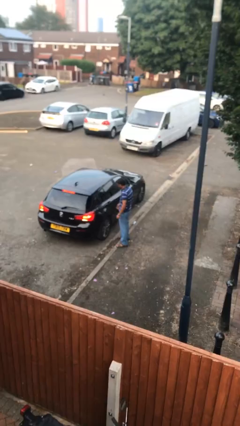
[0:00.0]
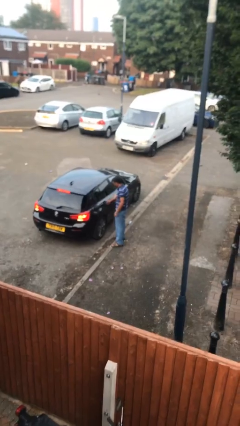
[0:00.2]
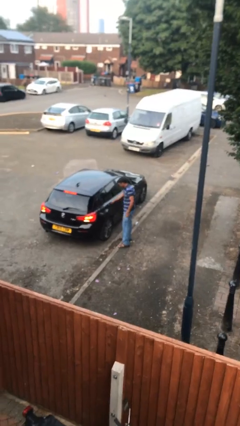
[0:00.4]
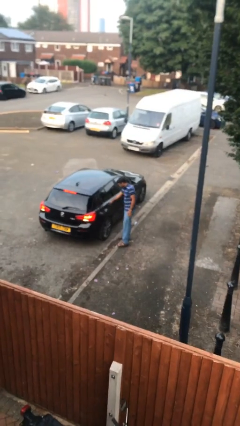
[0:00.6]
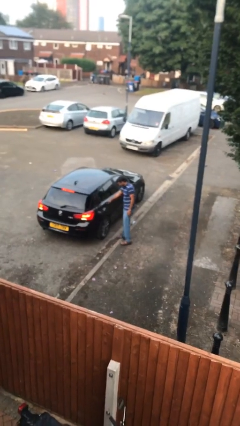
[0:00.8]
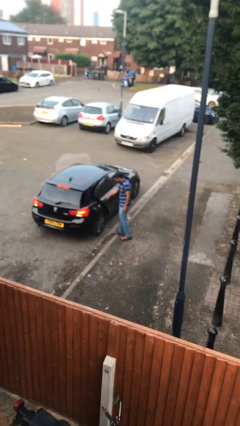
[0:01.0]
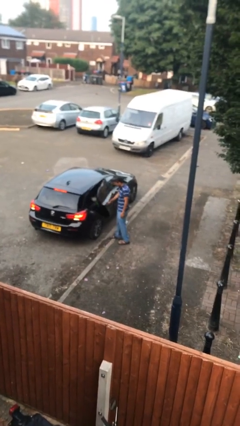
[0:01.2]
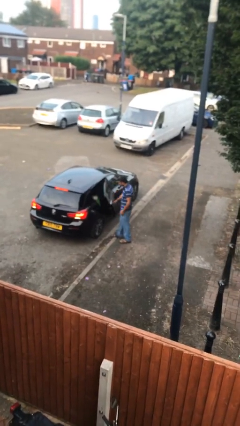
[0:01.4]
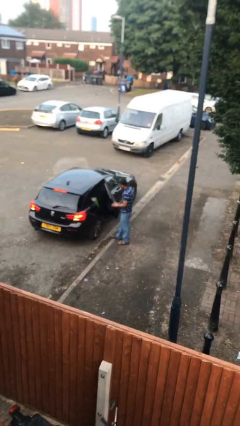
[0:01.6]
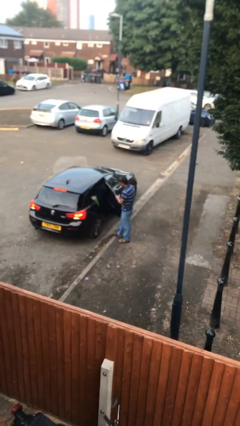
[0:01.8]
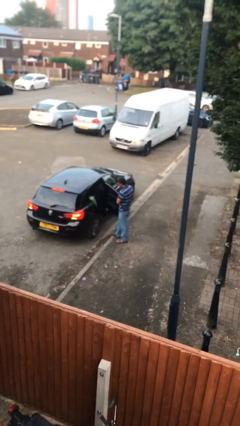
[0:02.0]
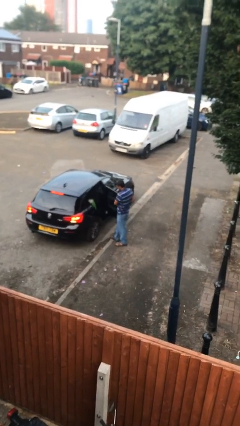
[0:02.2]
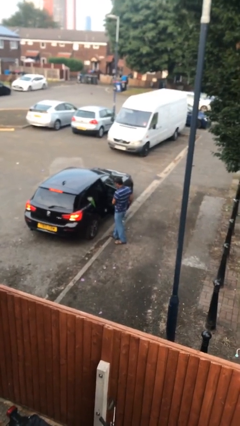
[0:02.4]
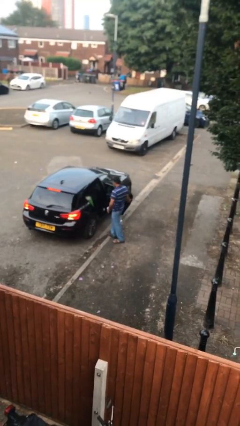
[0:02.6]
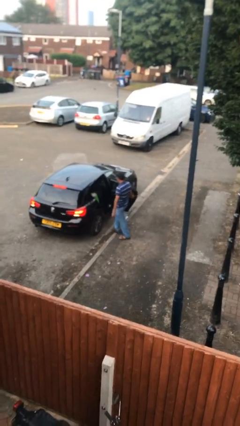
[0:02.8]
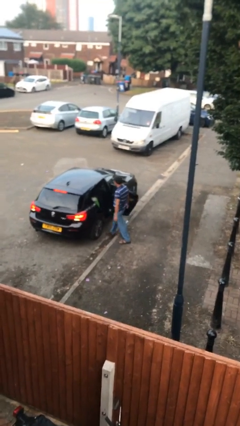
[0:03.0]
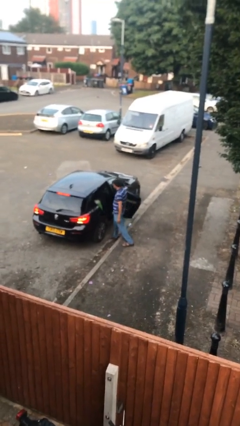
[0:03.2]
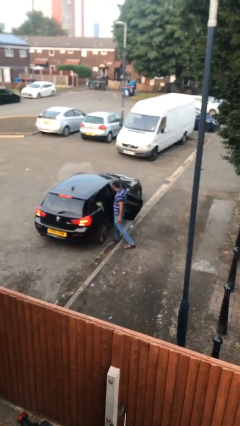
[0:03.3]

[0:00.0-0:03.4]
person opens car door

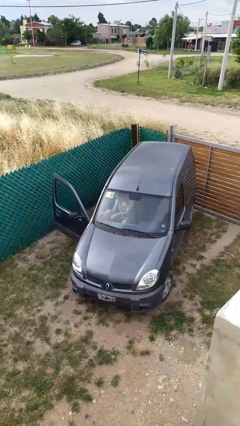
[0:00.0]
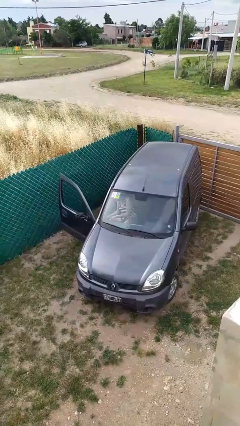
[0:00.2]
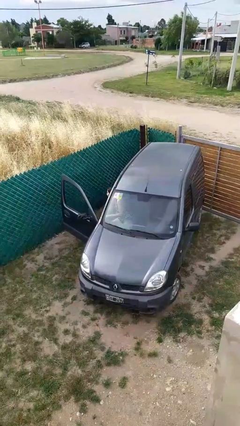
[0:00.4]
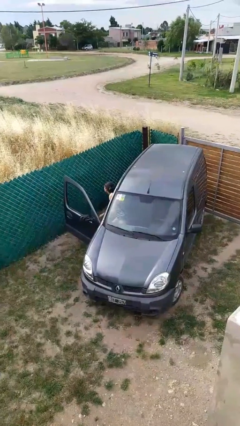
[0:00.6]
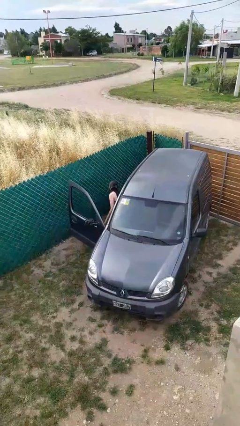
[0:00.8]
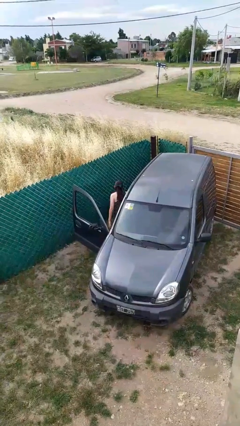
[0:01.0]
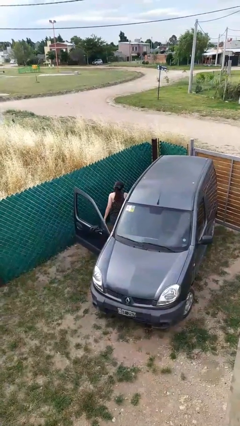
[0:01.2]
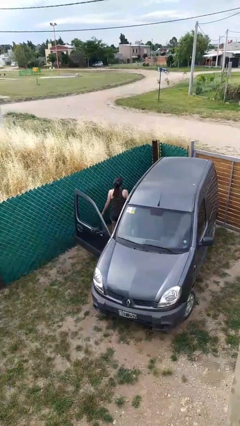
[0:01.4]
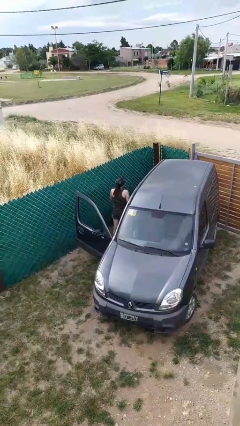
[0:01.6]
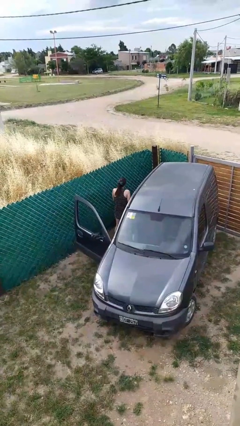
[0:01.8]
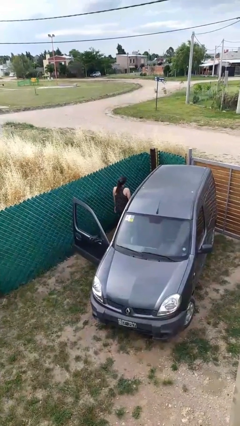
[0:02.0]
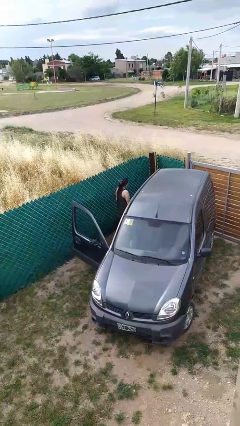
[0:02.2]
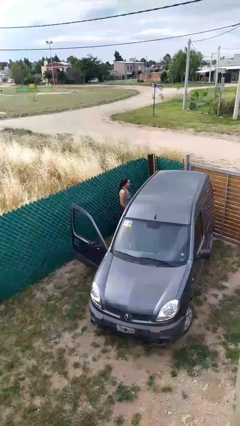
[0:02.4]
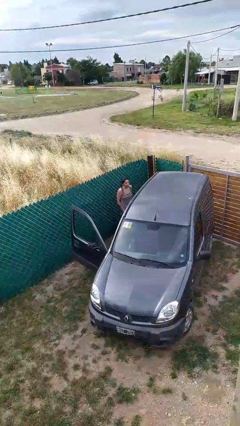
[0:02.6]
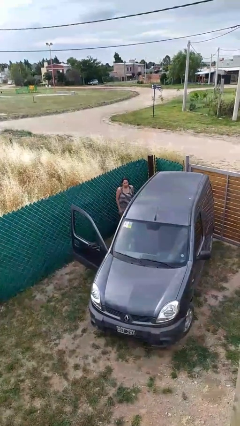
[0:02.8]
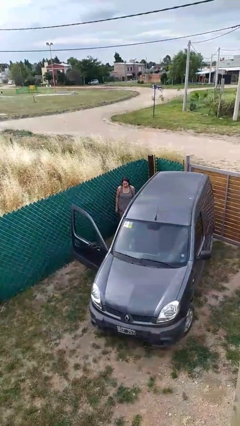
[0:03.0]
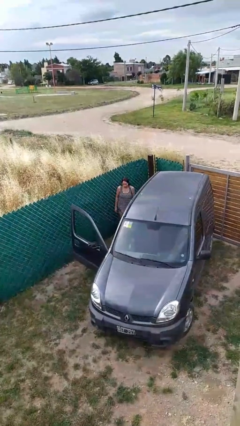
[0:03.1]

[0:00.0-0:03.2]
person exits car

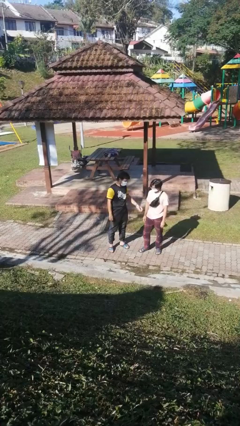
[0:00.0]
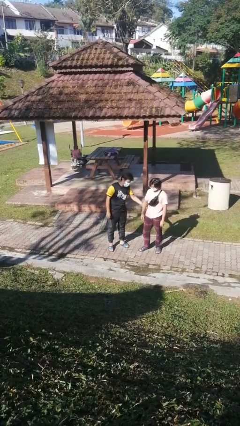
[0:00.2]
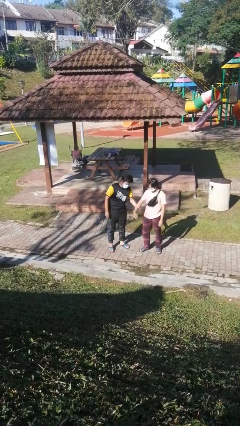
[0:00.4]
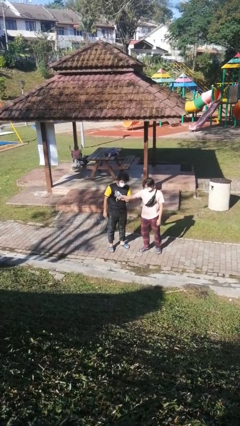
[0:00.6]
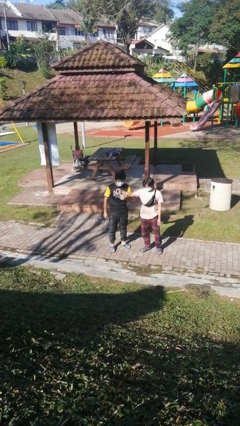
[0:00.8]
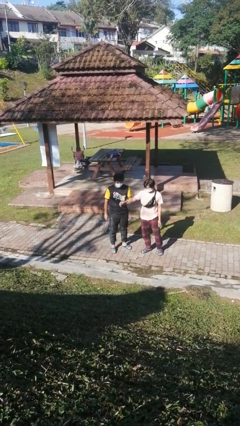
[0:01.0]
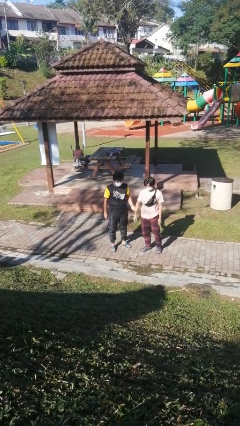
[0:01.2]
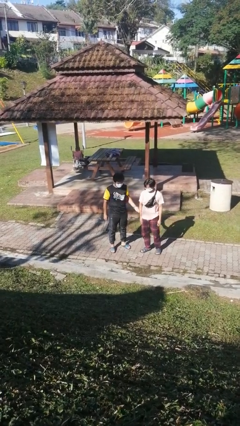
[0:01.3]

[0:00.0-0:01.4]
person grabs person by forearm

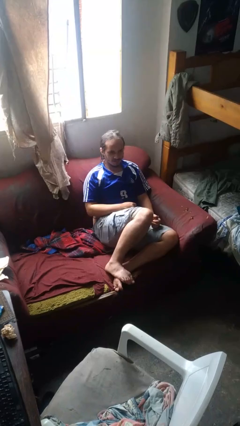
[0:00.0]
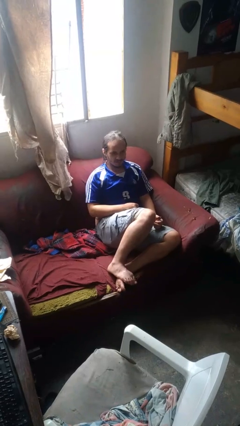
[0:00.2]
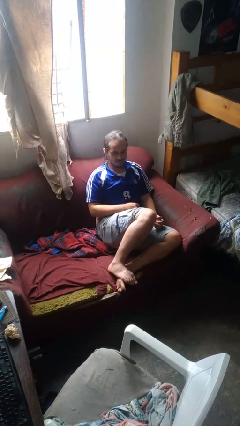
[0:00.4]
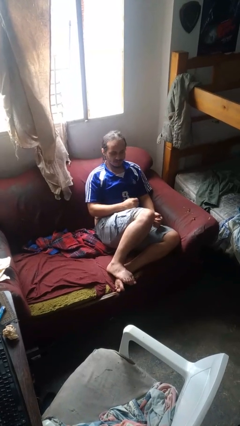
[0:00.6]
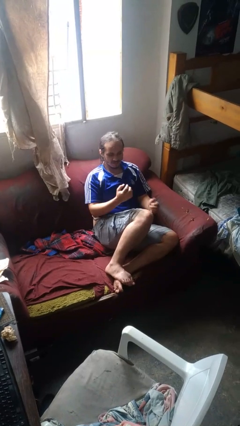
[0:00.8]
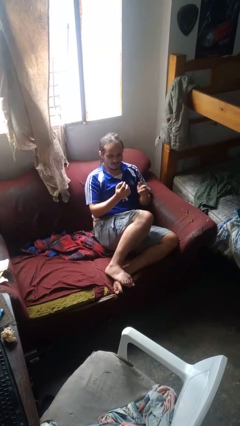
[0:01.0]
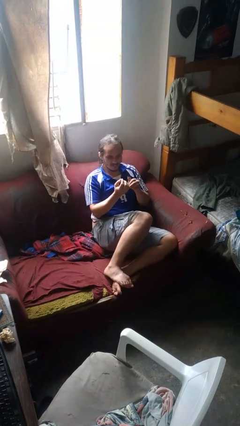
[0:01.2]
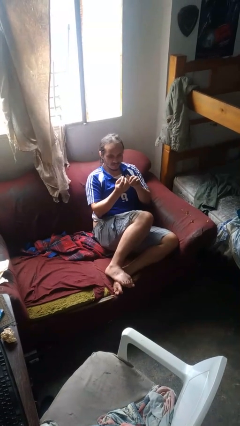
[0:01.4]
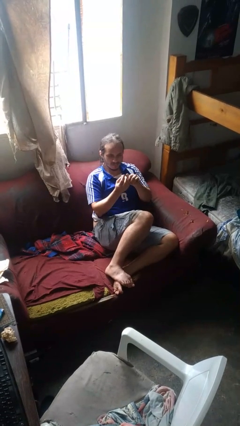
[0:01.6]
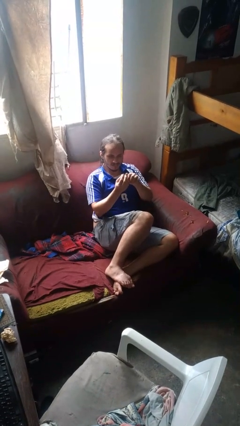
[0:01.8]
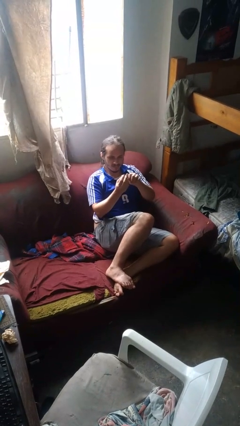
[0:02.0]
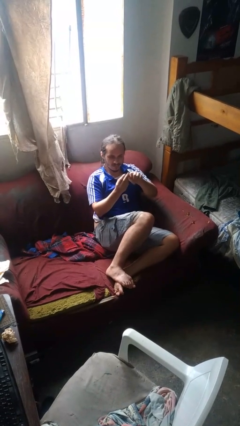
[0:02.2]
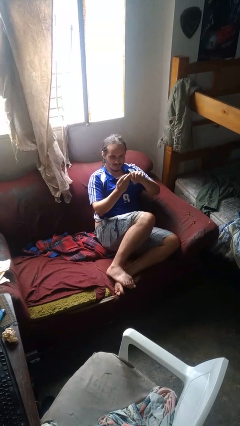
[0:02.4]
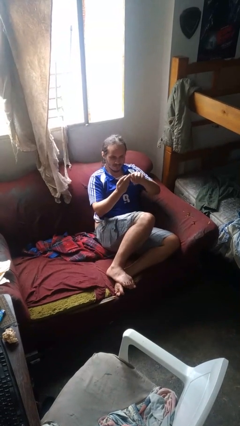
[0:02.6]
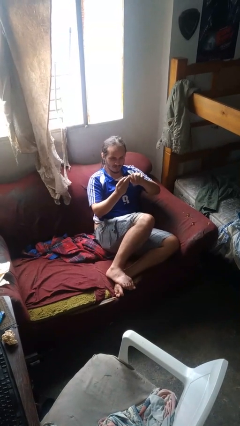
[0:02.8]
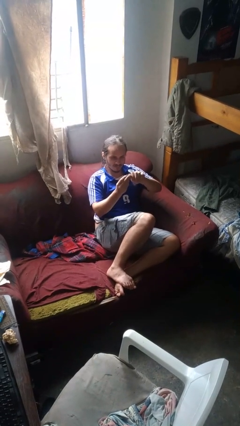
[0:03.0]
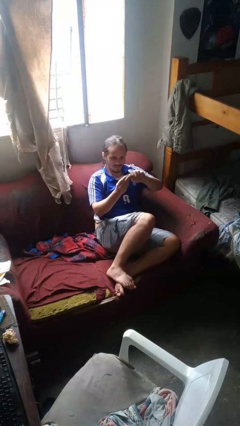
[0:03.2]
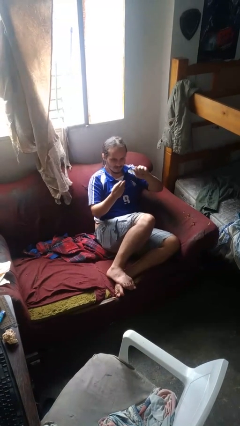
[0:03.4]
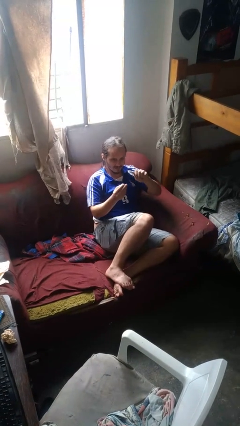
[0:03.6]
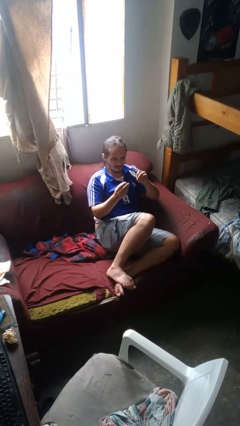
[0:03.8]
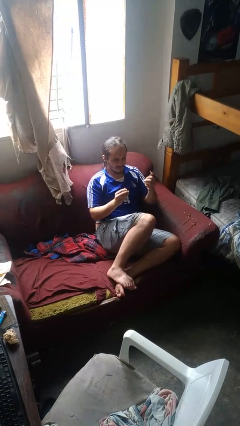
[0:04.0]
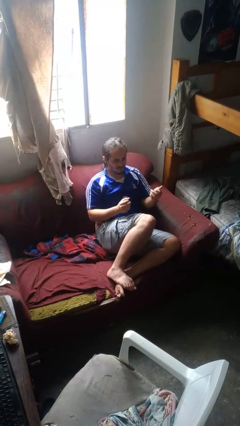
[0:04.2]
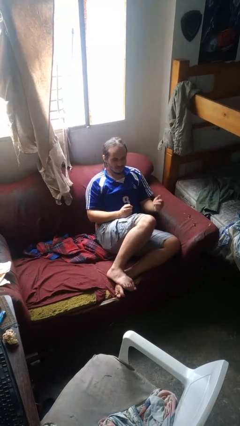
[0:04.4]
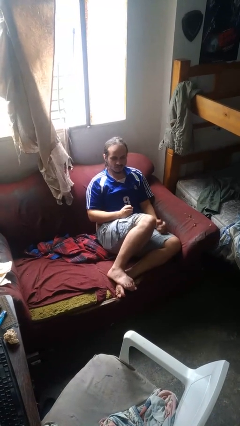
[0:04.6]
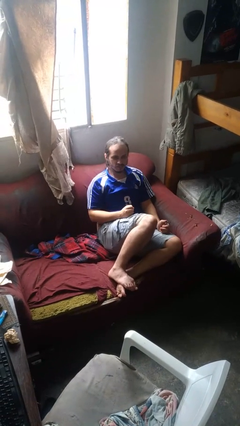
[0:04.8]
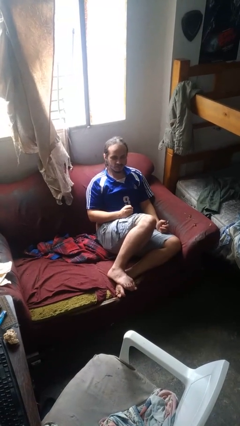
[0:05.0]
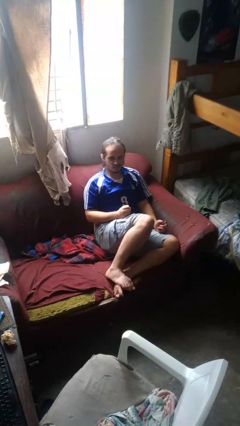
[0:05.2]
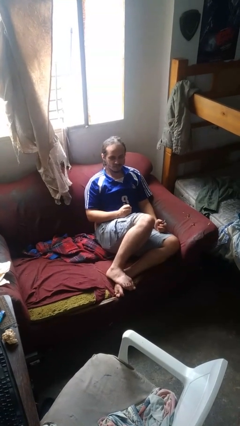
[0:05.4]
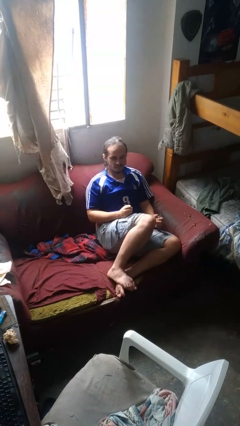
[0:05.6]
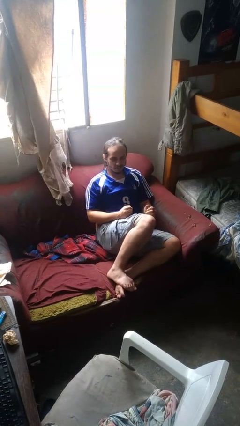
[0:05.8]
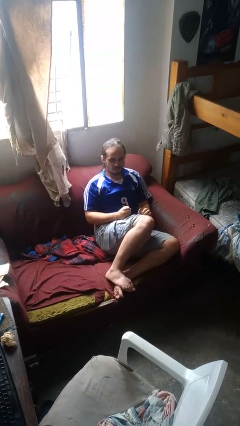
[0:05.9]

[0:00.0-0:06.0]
person clips fingernails

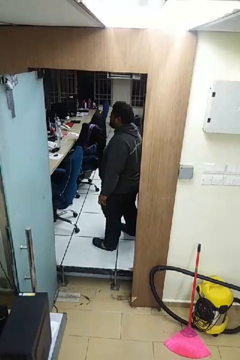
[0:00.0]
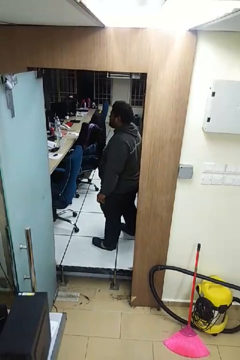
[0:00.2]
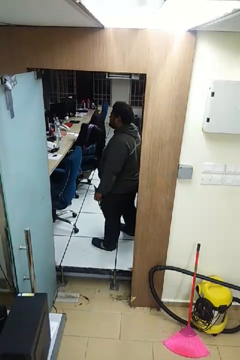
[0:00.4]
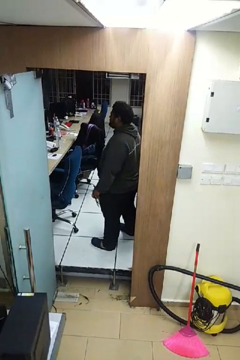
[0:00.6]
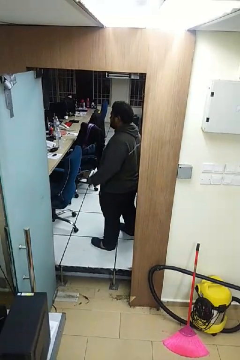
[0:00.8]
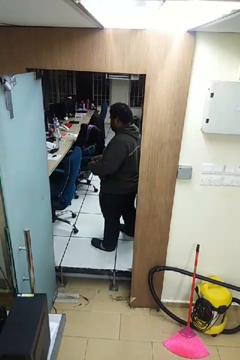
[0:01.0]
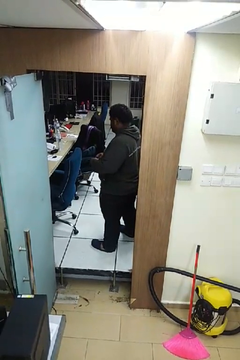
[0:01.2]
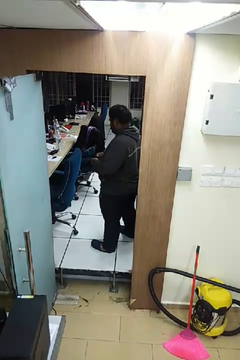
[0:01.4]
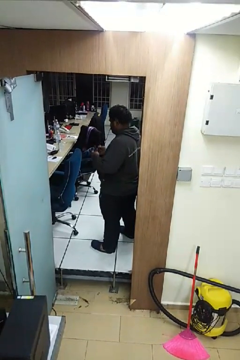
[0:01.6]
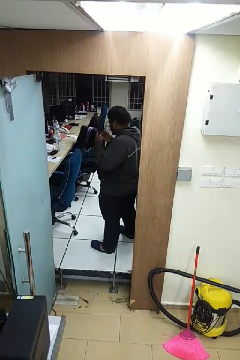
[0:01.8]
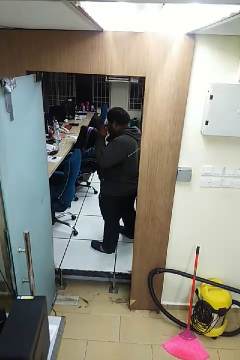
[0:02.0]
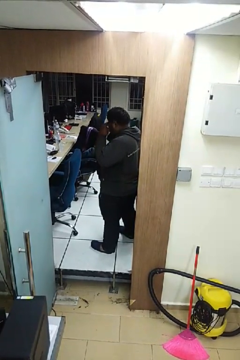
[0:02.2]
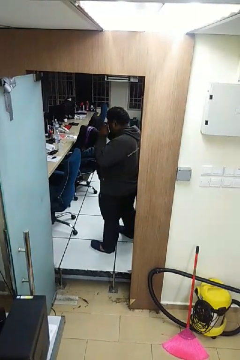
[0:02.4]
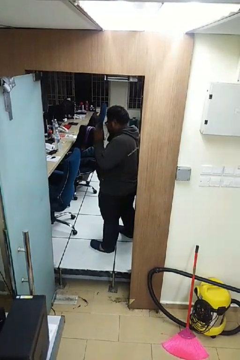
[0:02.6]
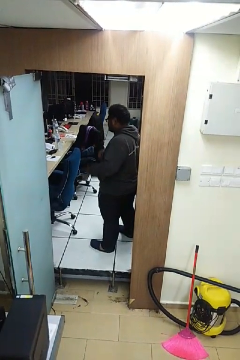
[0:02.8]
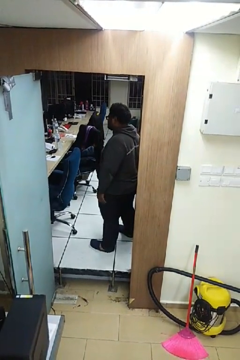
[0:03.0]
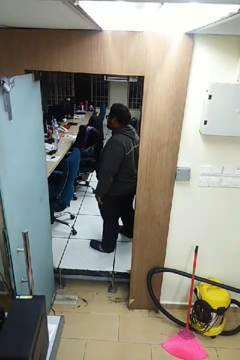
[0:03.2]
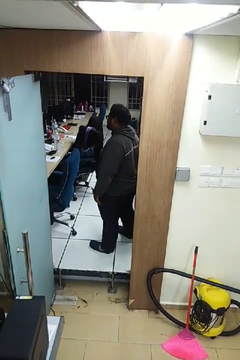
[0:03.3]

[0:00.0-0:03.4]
person puts on glasses

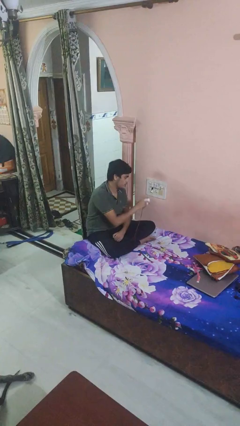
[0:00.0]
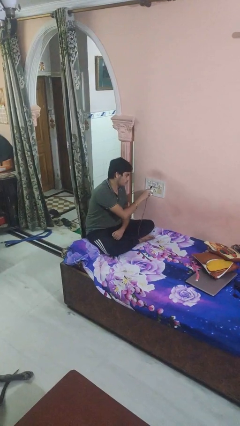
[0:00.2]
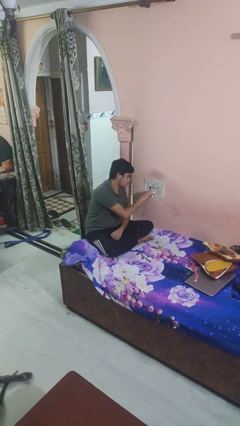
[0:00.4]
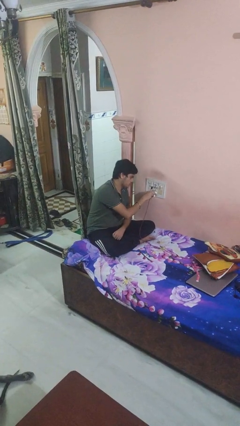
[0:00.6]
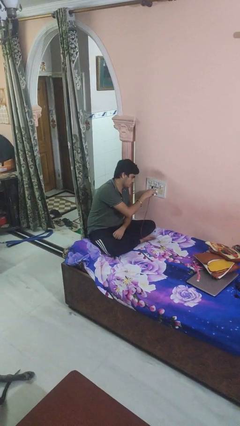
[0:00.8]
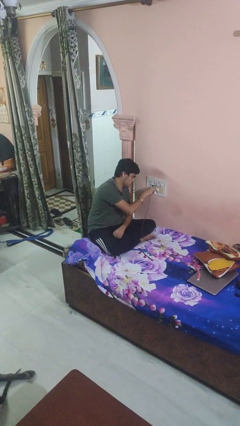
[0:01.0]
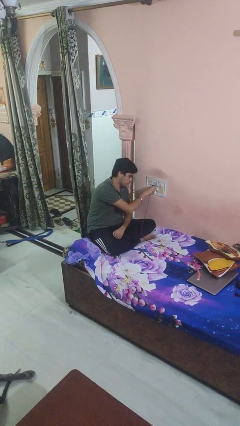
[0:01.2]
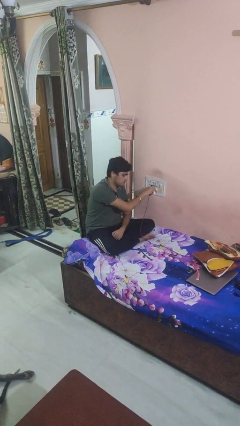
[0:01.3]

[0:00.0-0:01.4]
person plugs into electrical socket
